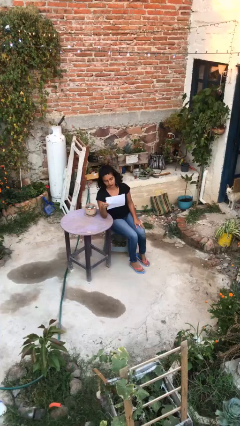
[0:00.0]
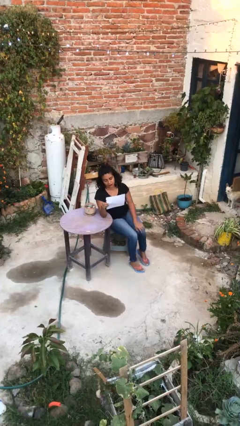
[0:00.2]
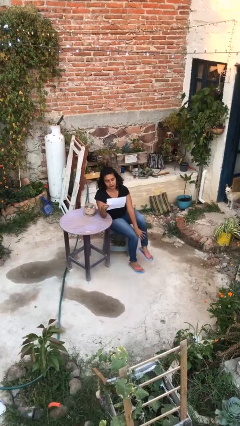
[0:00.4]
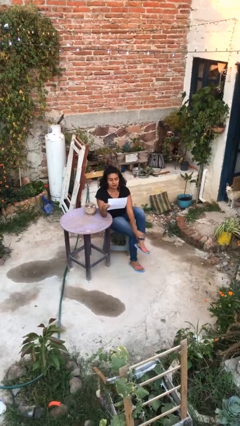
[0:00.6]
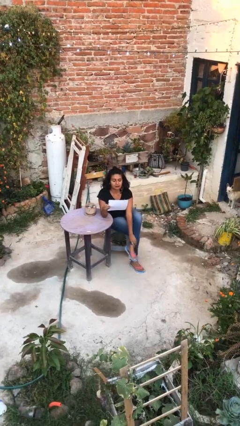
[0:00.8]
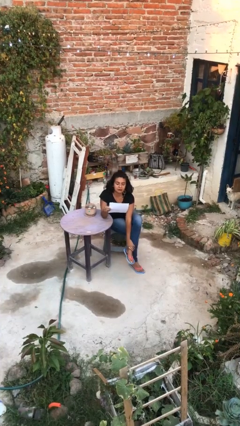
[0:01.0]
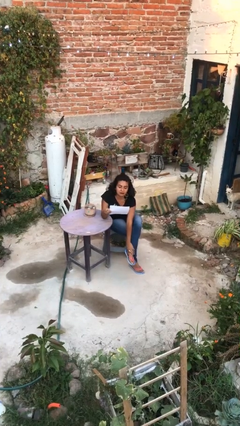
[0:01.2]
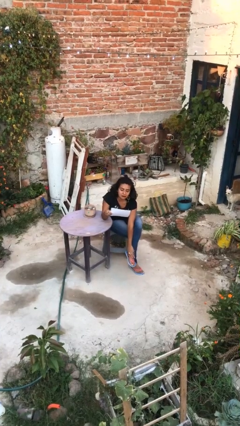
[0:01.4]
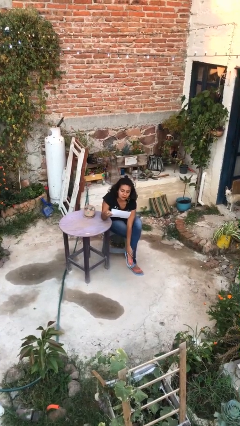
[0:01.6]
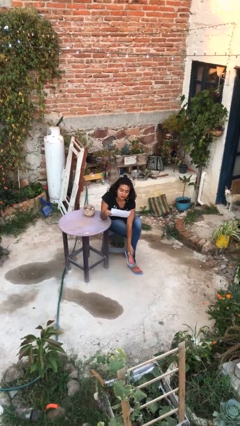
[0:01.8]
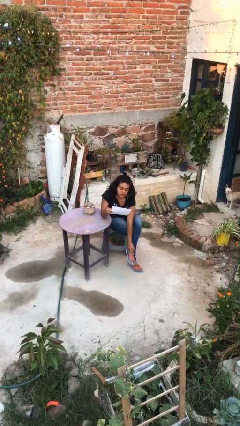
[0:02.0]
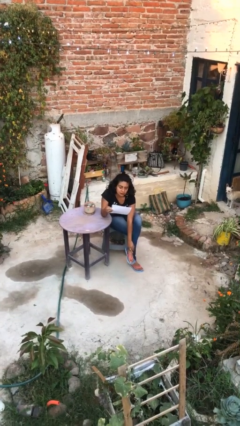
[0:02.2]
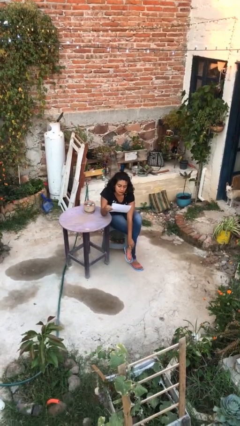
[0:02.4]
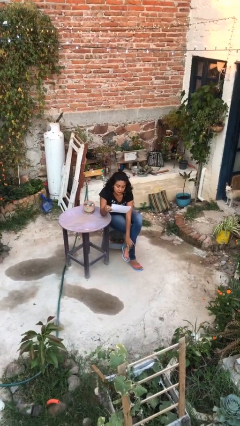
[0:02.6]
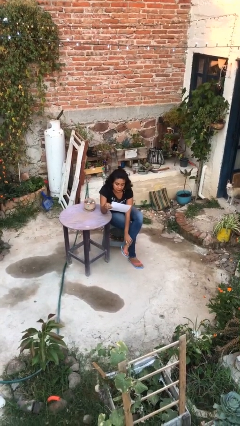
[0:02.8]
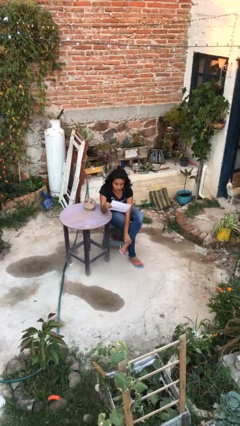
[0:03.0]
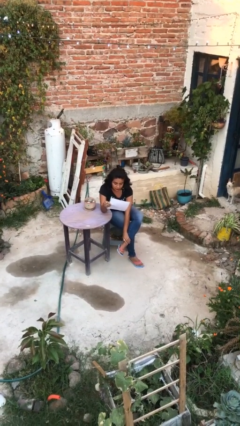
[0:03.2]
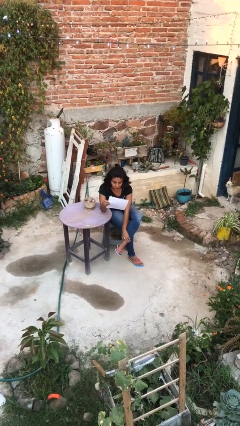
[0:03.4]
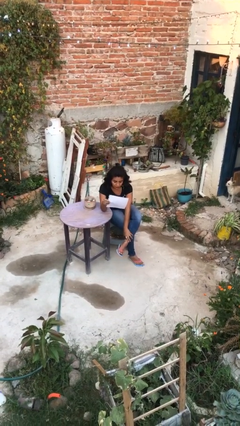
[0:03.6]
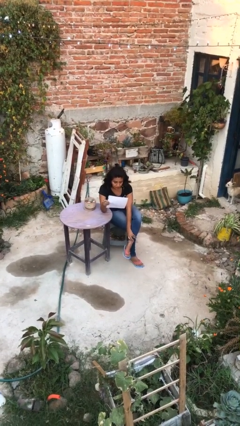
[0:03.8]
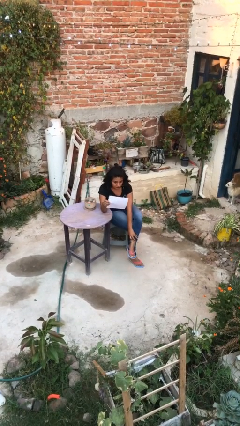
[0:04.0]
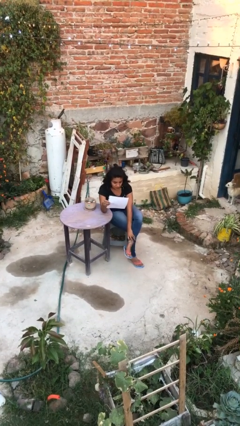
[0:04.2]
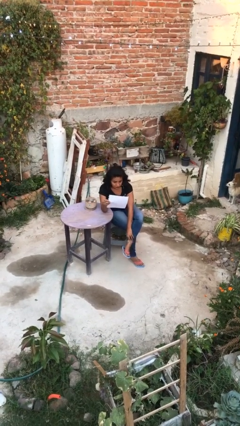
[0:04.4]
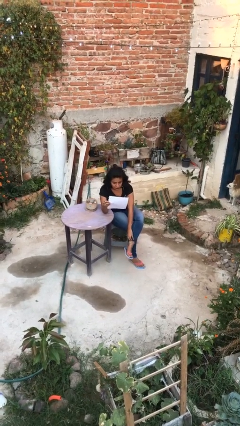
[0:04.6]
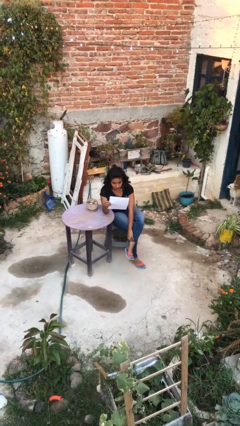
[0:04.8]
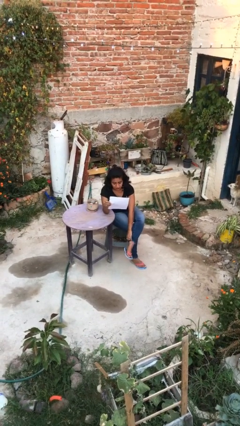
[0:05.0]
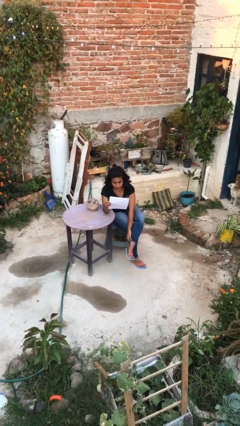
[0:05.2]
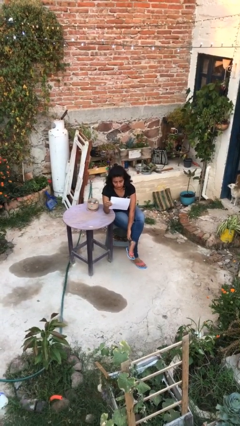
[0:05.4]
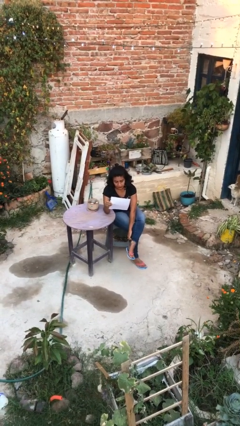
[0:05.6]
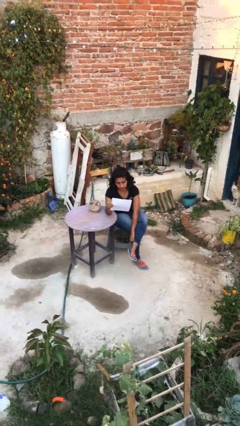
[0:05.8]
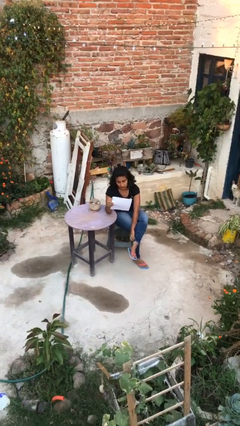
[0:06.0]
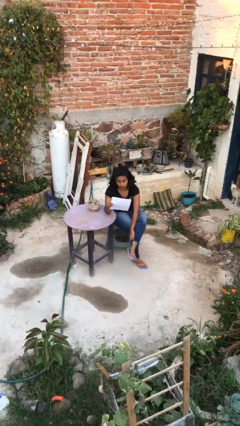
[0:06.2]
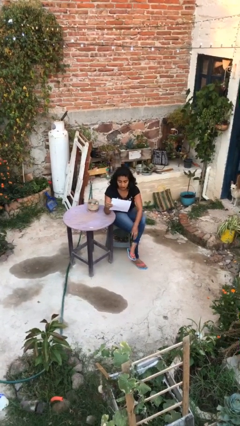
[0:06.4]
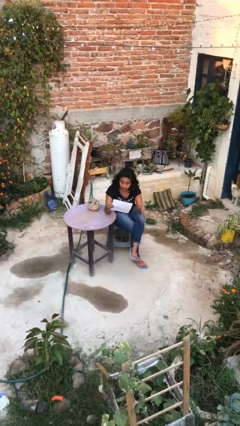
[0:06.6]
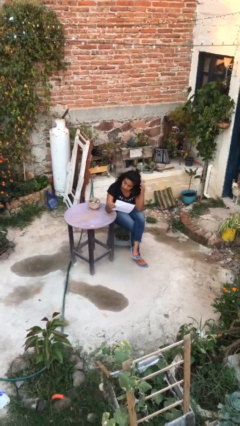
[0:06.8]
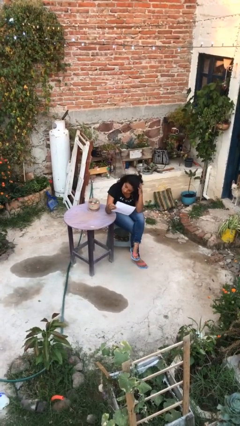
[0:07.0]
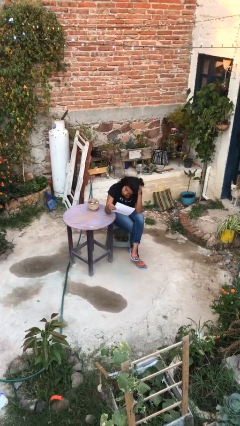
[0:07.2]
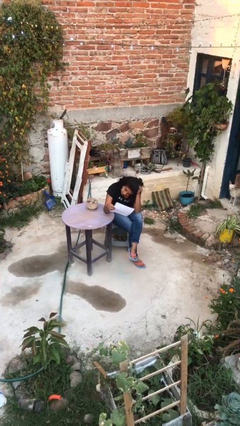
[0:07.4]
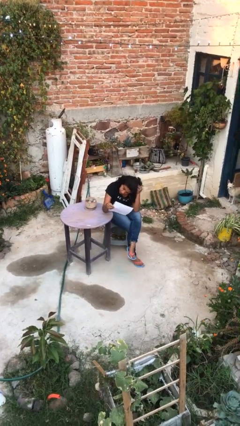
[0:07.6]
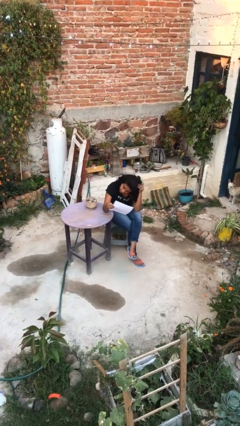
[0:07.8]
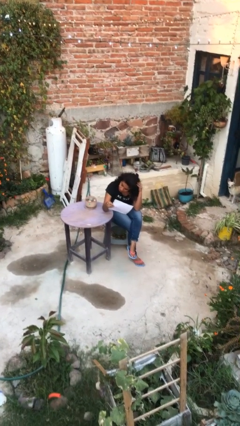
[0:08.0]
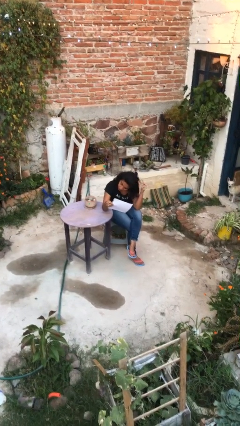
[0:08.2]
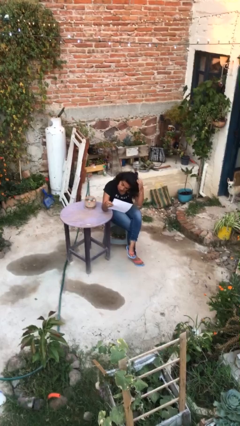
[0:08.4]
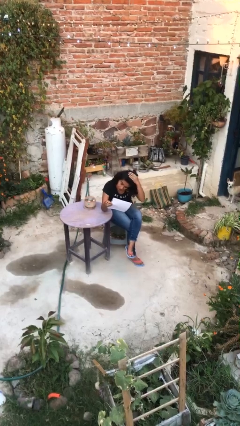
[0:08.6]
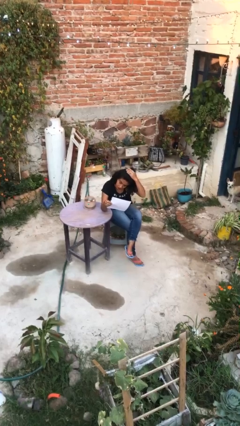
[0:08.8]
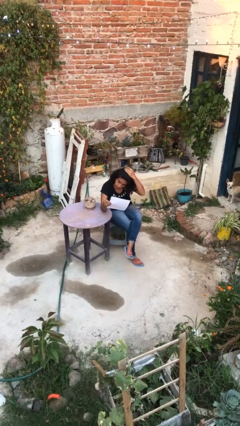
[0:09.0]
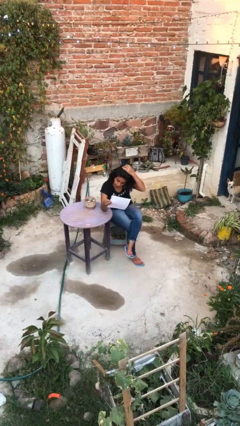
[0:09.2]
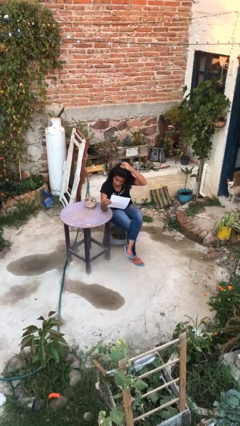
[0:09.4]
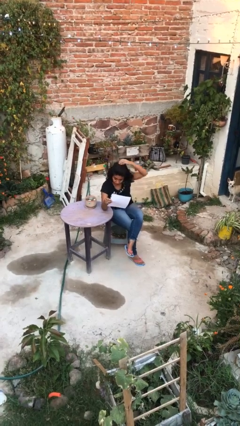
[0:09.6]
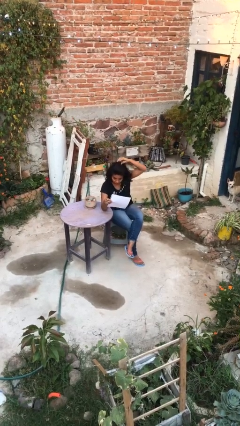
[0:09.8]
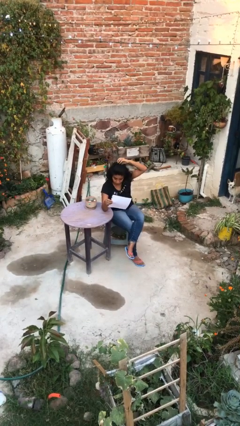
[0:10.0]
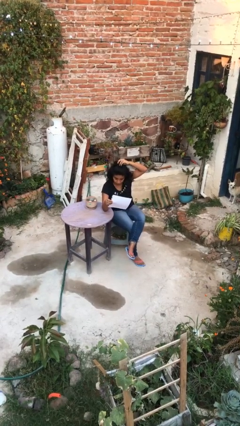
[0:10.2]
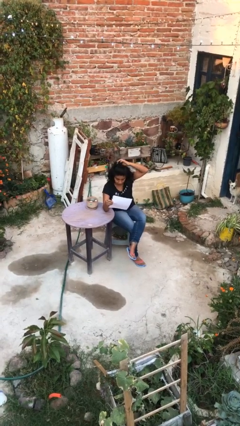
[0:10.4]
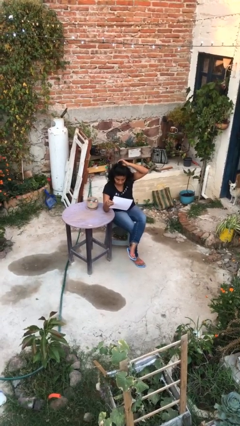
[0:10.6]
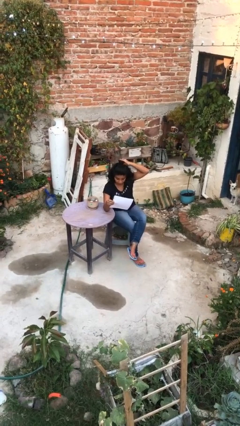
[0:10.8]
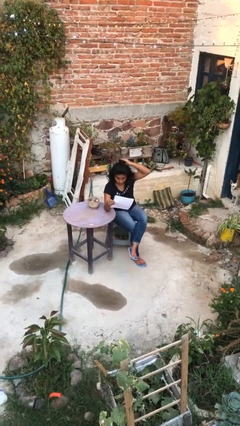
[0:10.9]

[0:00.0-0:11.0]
person reads document

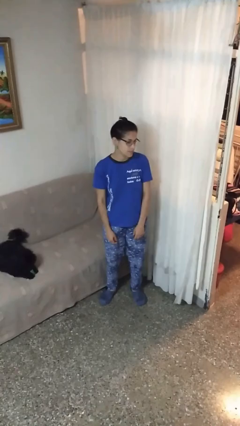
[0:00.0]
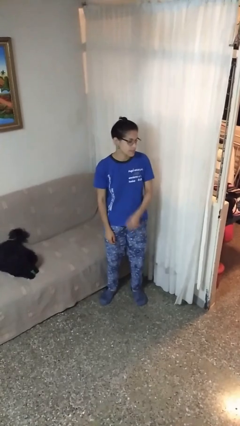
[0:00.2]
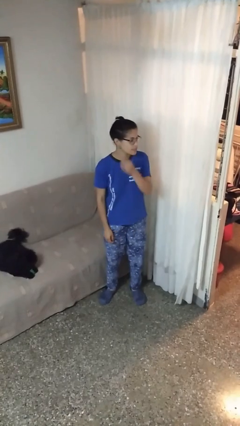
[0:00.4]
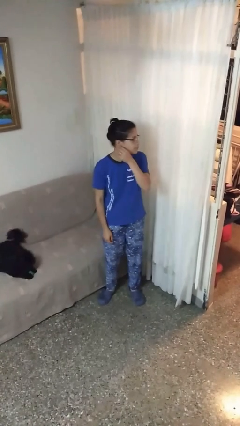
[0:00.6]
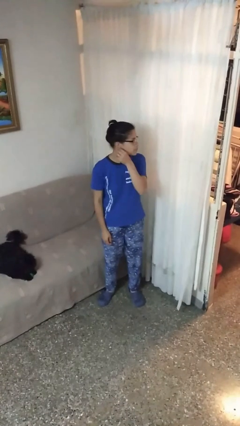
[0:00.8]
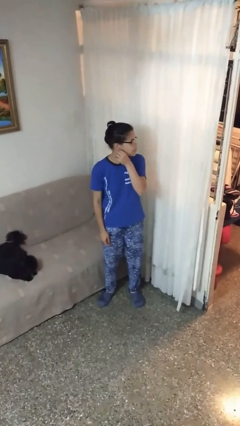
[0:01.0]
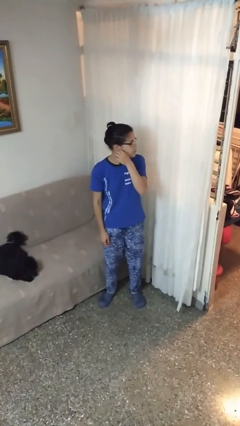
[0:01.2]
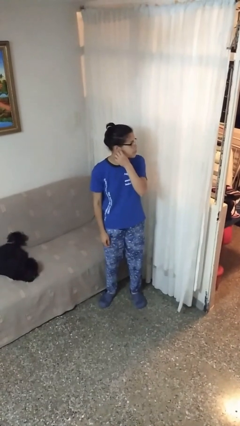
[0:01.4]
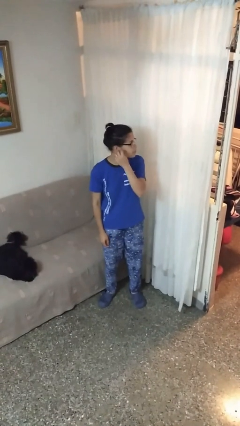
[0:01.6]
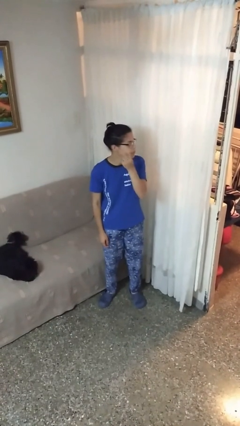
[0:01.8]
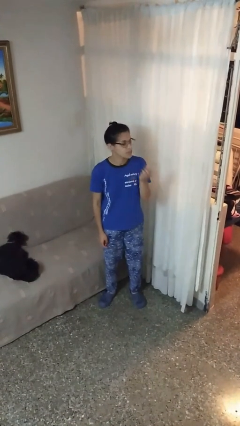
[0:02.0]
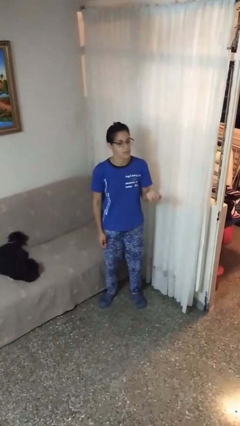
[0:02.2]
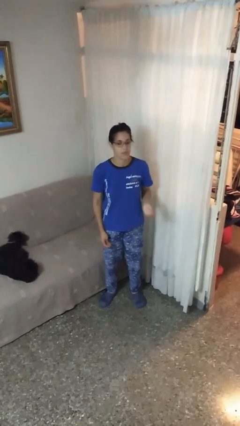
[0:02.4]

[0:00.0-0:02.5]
person takes off earrings

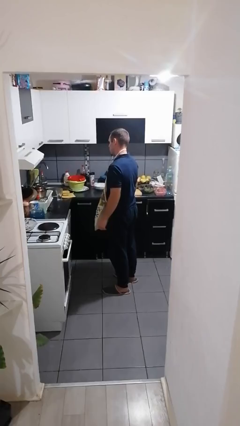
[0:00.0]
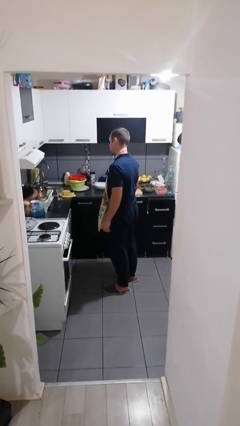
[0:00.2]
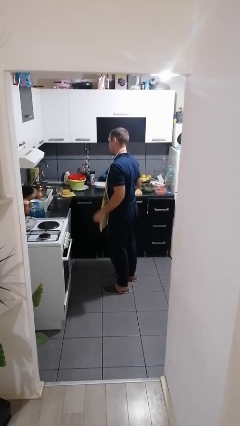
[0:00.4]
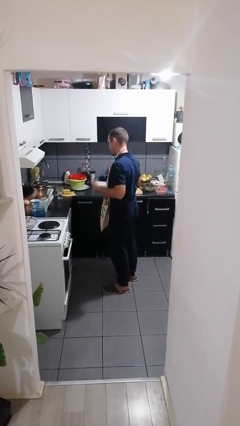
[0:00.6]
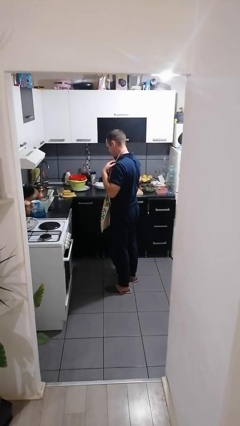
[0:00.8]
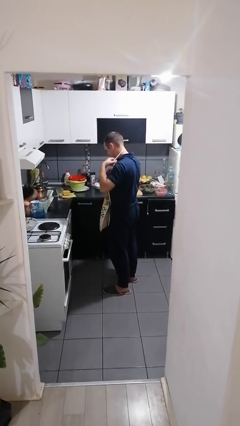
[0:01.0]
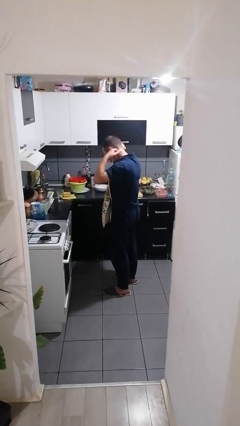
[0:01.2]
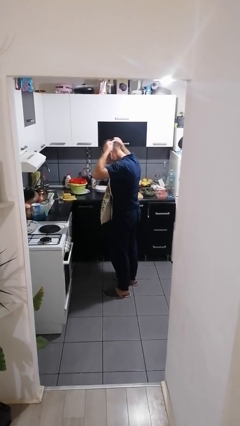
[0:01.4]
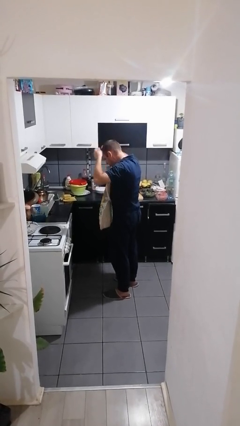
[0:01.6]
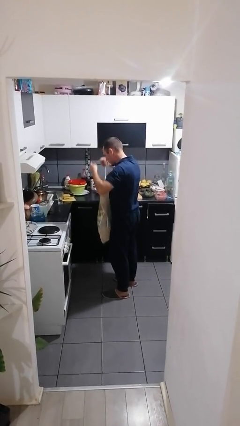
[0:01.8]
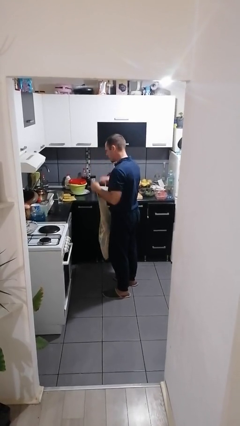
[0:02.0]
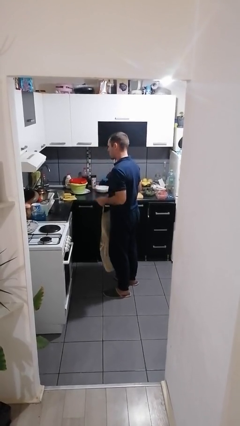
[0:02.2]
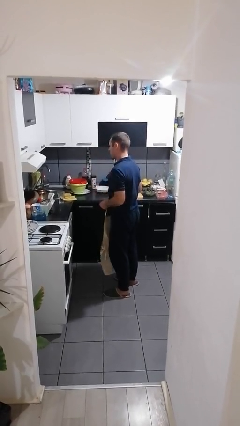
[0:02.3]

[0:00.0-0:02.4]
person takes off apron

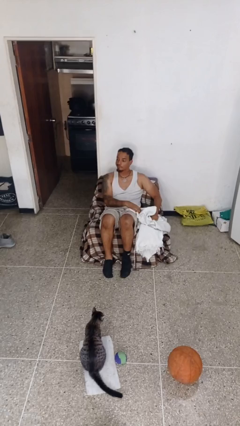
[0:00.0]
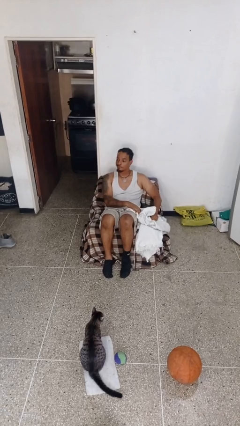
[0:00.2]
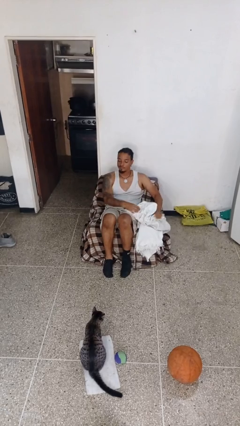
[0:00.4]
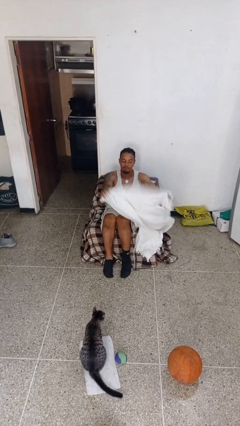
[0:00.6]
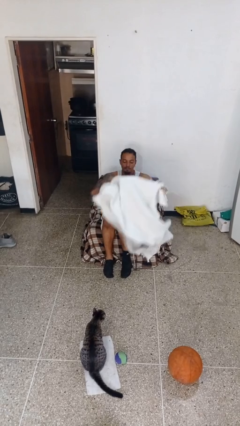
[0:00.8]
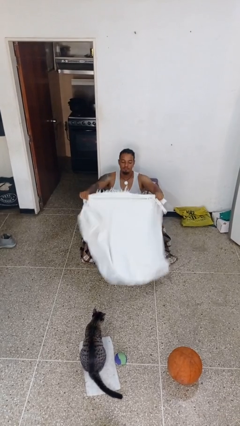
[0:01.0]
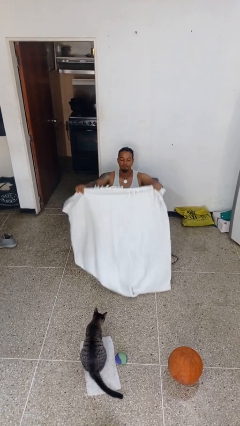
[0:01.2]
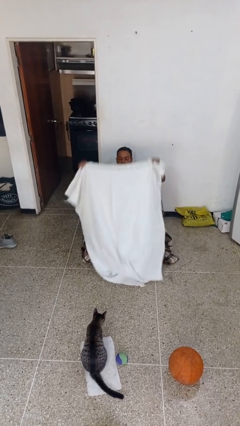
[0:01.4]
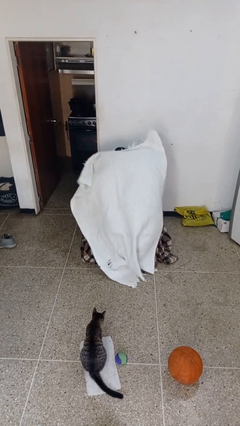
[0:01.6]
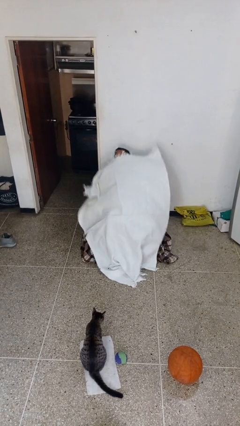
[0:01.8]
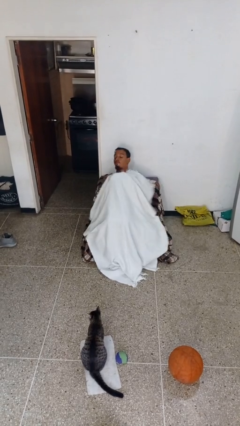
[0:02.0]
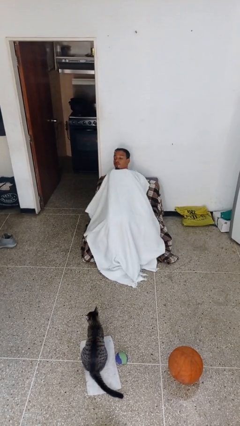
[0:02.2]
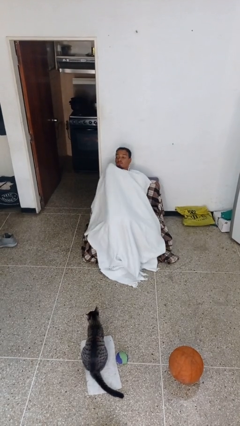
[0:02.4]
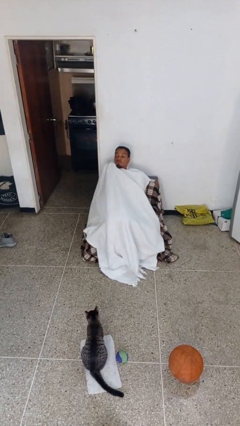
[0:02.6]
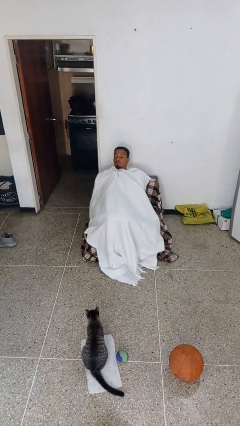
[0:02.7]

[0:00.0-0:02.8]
person covers with blanket
